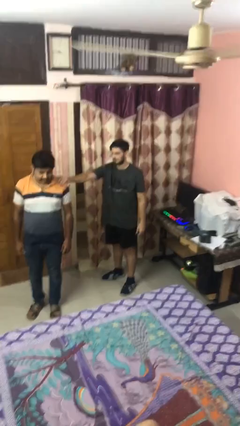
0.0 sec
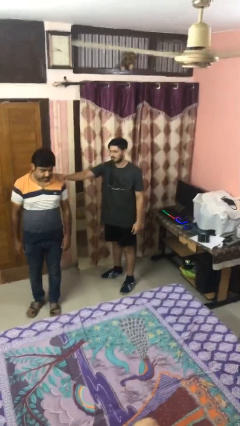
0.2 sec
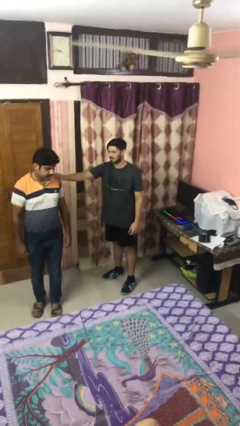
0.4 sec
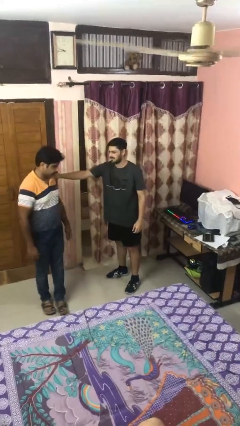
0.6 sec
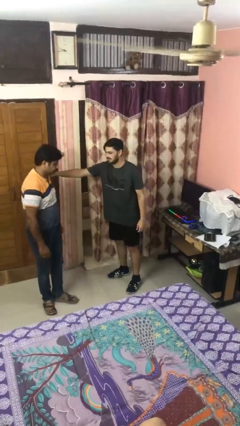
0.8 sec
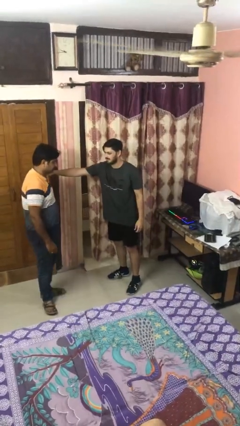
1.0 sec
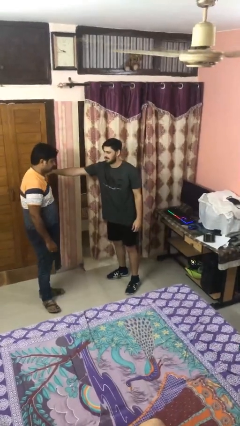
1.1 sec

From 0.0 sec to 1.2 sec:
person spins person around

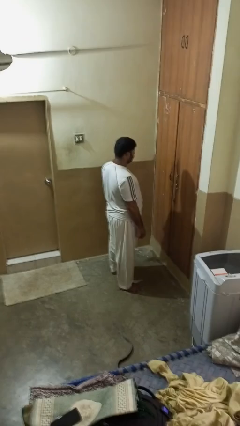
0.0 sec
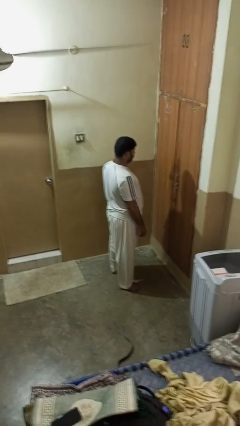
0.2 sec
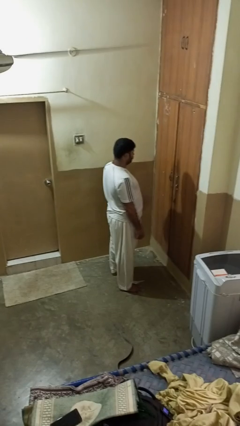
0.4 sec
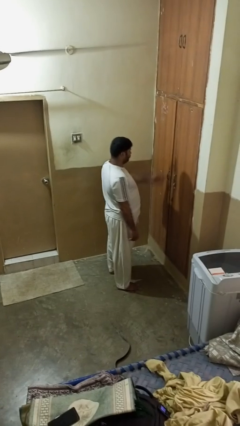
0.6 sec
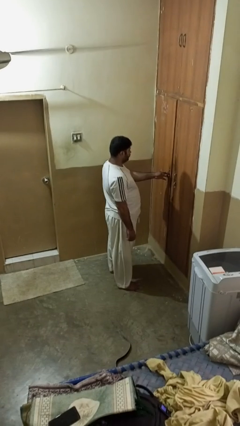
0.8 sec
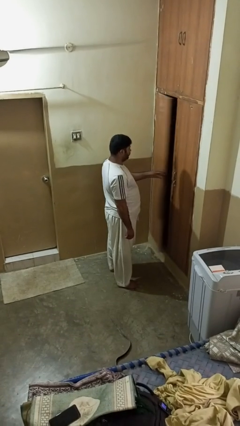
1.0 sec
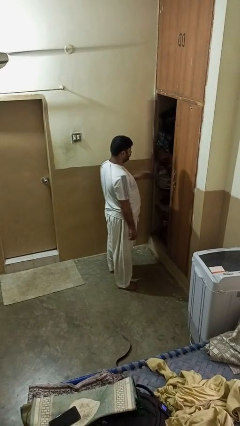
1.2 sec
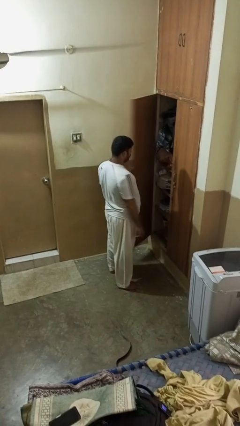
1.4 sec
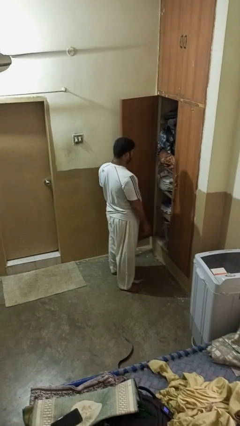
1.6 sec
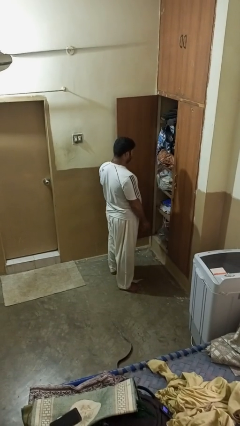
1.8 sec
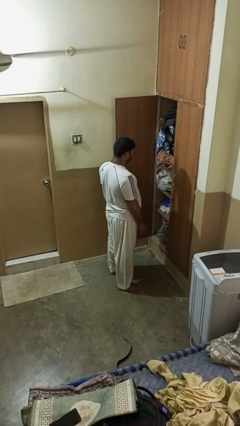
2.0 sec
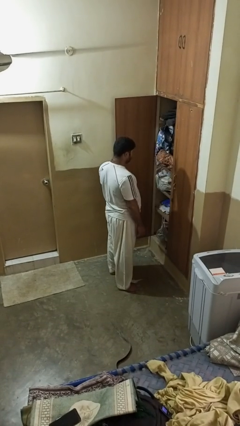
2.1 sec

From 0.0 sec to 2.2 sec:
person opens closet door

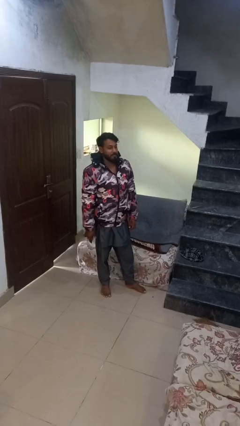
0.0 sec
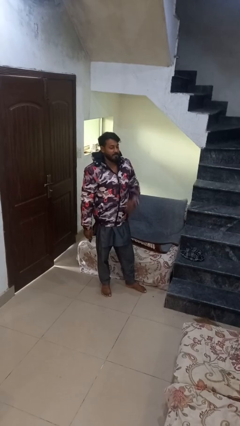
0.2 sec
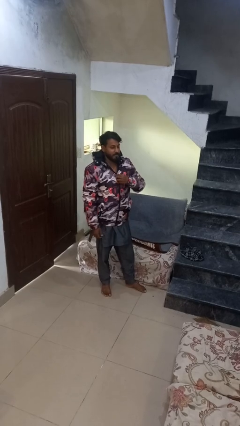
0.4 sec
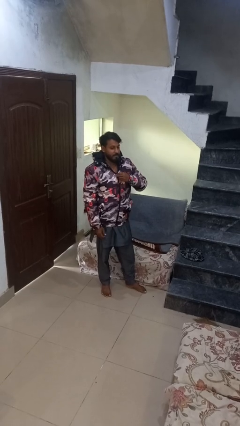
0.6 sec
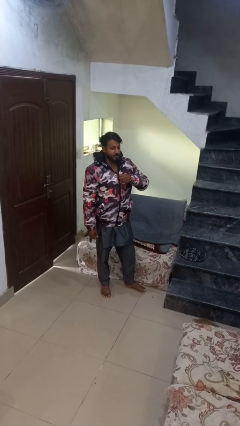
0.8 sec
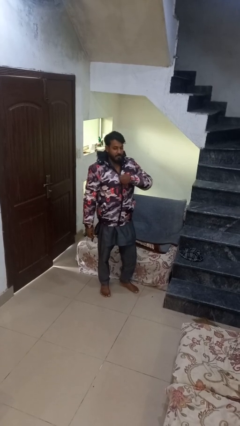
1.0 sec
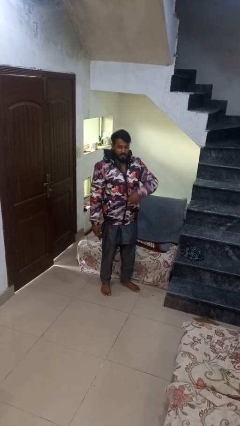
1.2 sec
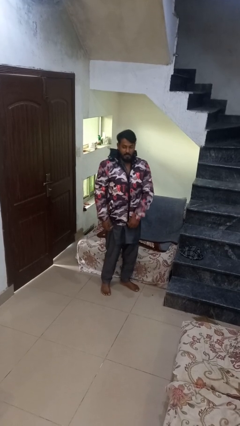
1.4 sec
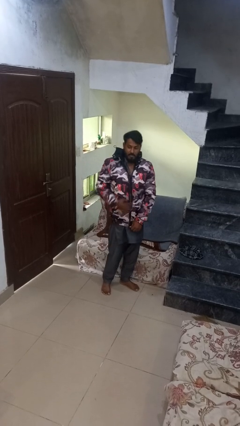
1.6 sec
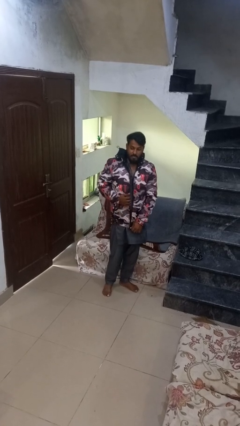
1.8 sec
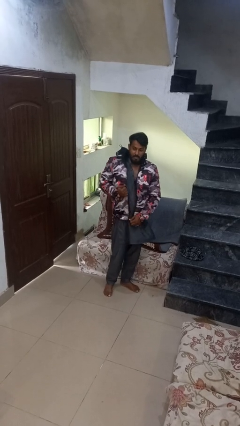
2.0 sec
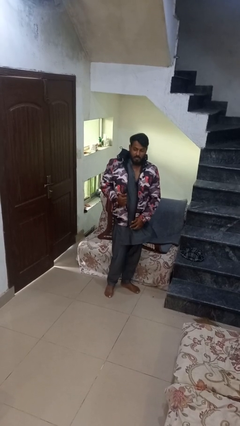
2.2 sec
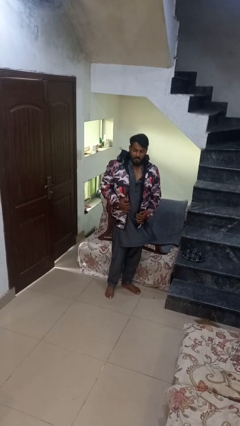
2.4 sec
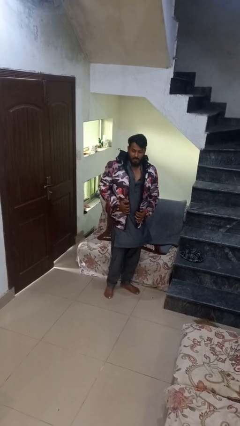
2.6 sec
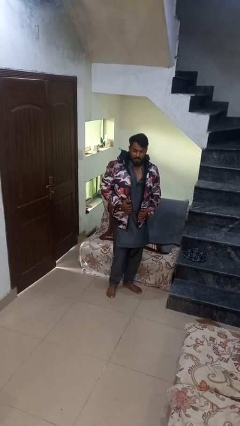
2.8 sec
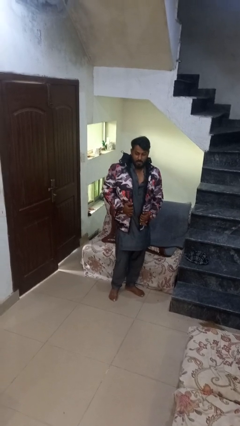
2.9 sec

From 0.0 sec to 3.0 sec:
person unzips jacket

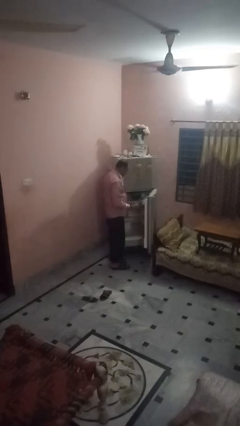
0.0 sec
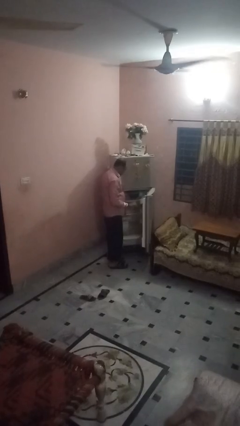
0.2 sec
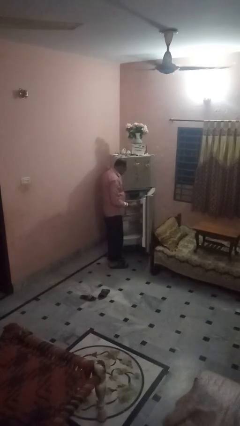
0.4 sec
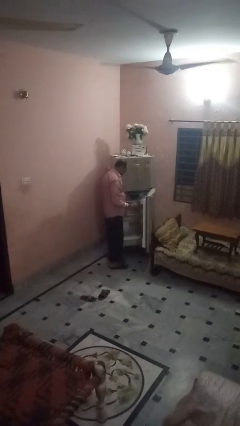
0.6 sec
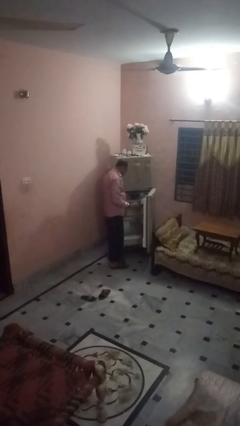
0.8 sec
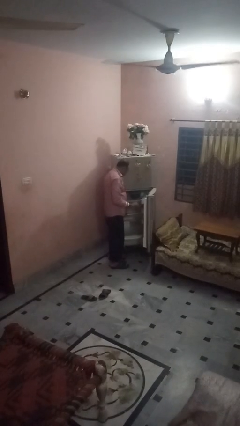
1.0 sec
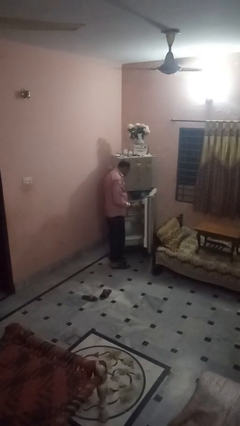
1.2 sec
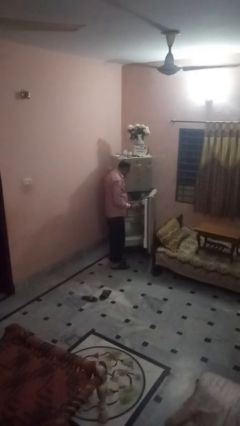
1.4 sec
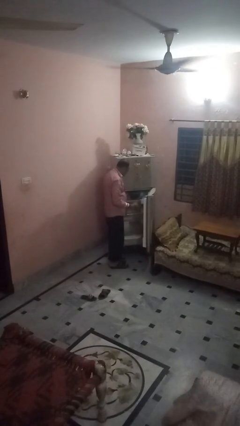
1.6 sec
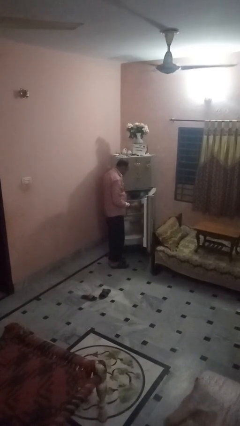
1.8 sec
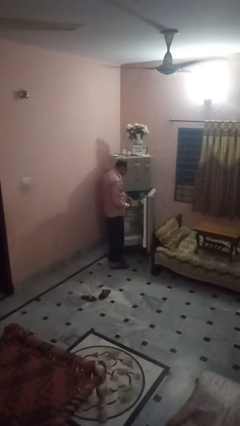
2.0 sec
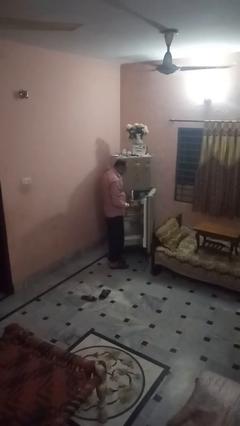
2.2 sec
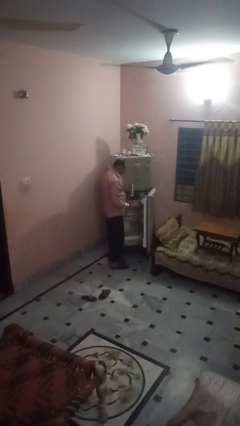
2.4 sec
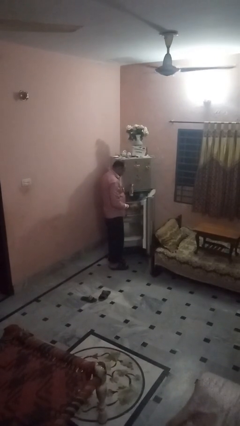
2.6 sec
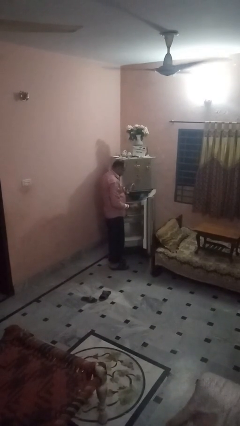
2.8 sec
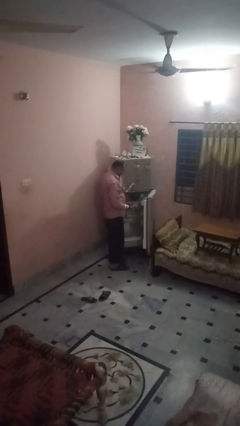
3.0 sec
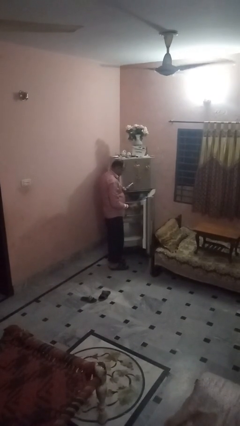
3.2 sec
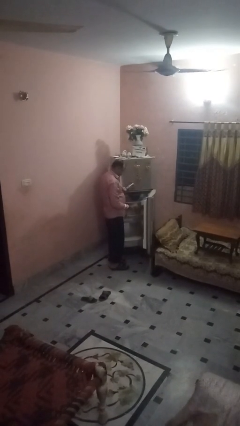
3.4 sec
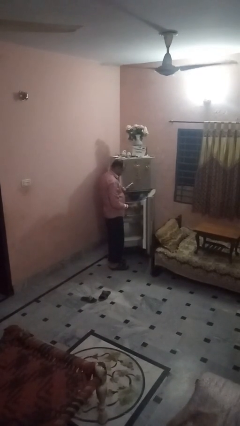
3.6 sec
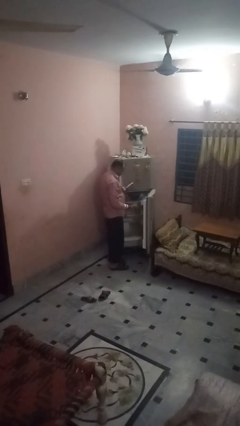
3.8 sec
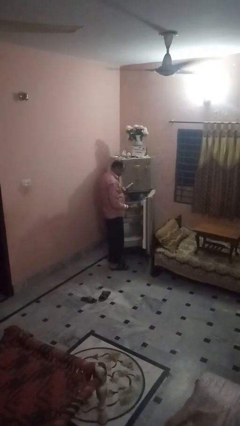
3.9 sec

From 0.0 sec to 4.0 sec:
person puts object into refrigerator

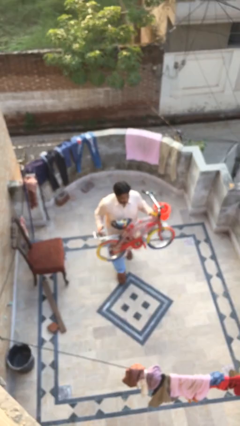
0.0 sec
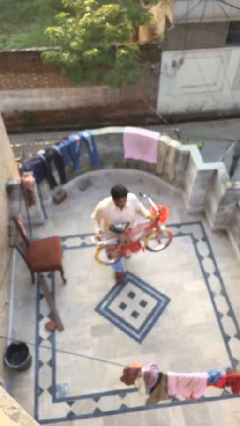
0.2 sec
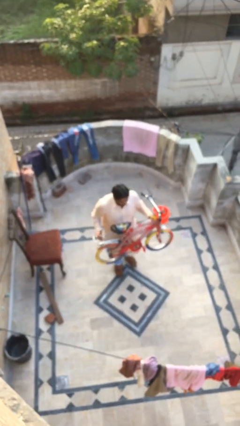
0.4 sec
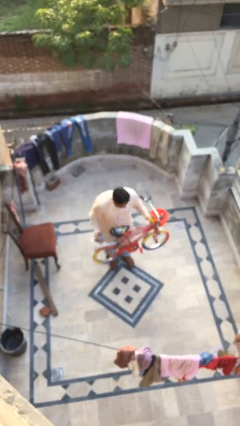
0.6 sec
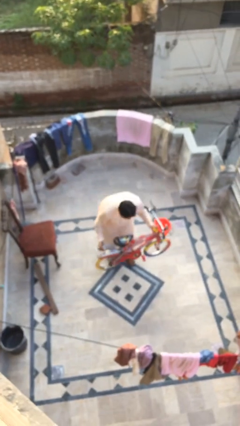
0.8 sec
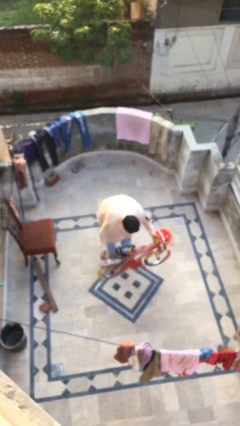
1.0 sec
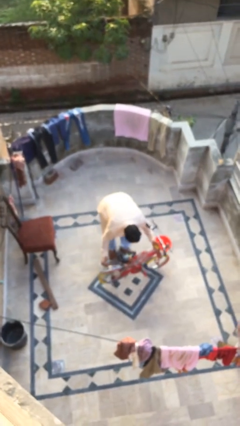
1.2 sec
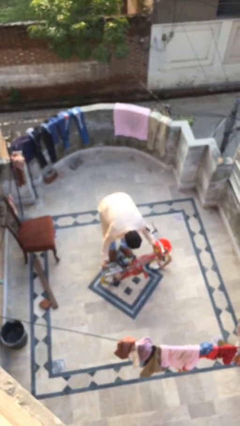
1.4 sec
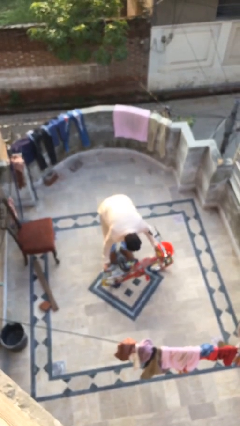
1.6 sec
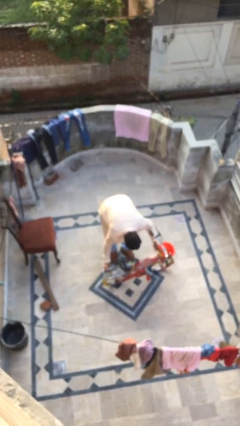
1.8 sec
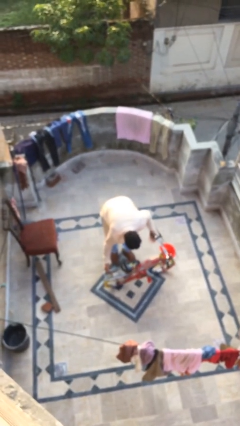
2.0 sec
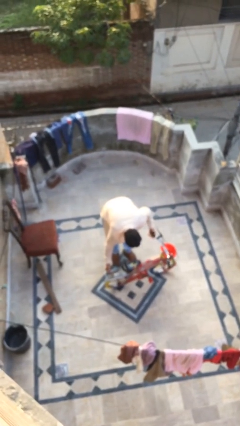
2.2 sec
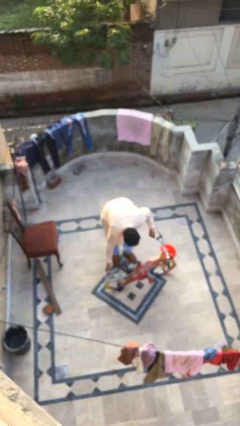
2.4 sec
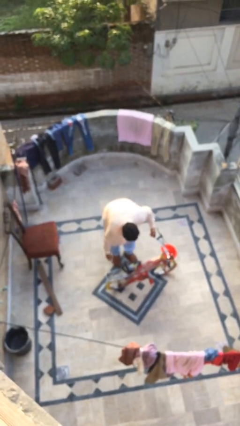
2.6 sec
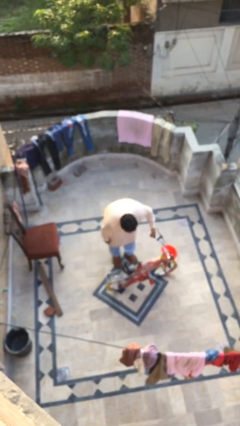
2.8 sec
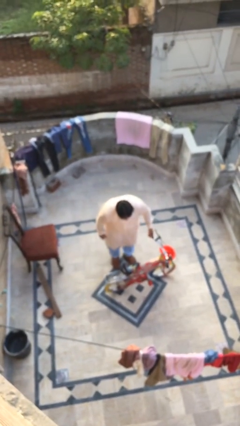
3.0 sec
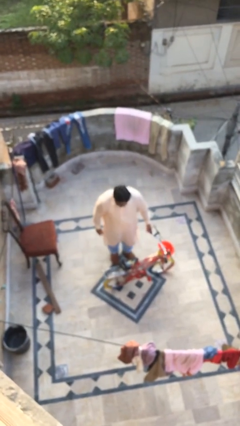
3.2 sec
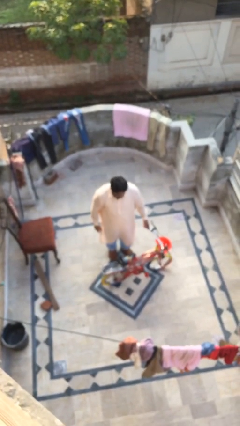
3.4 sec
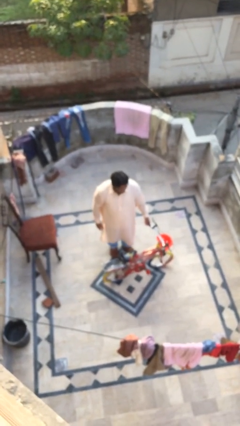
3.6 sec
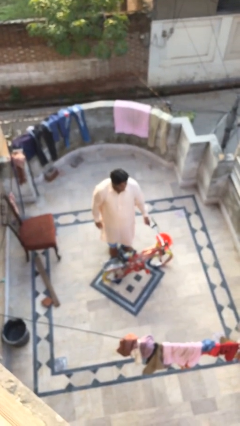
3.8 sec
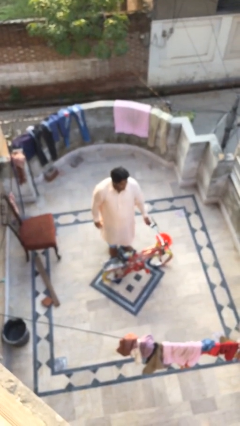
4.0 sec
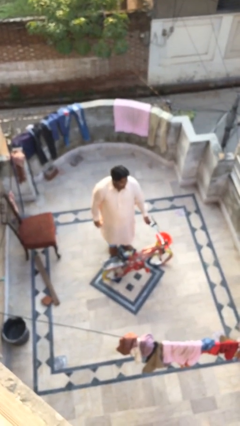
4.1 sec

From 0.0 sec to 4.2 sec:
person puts down object on floor

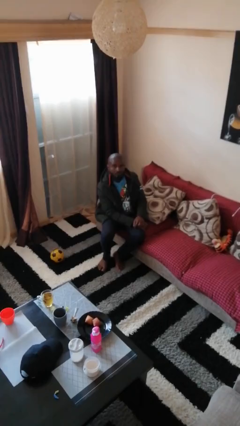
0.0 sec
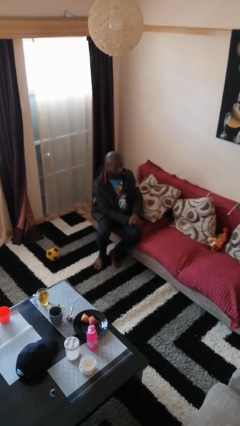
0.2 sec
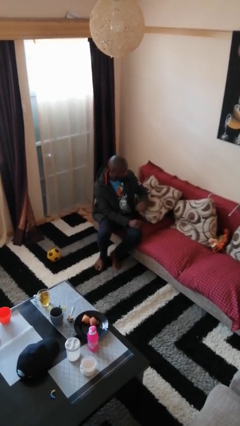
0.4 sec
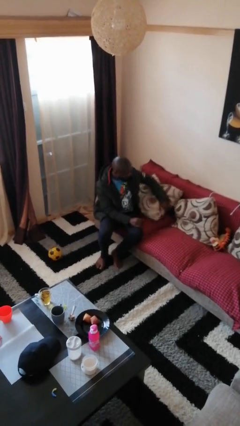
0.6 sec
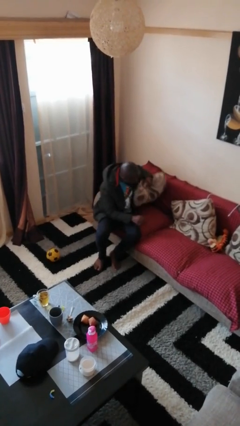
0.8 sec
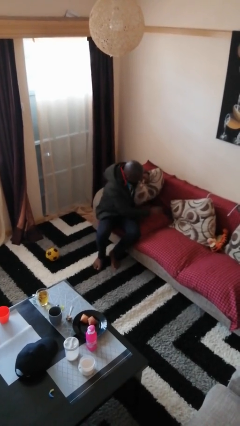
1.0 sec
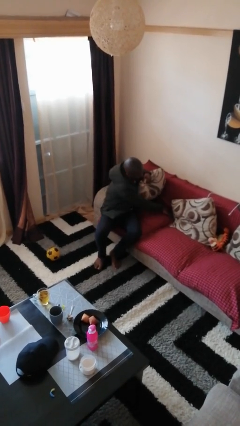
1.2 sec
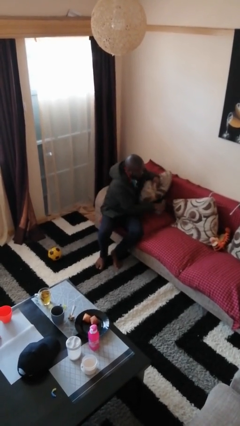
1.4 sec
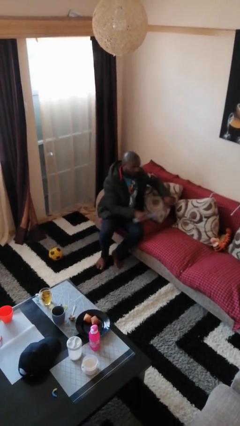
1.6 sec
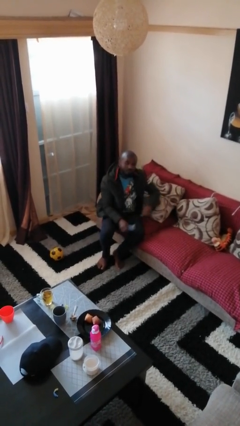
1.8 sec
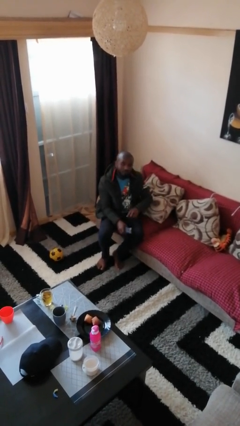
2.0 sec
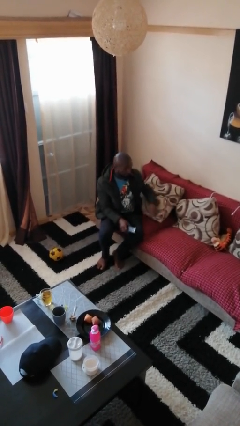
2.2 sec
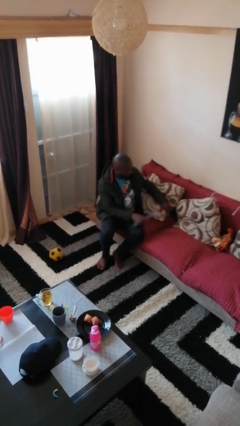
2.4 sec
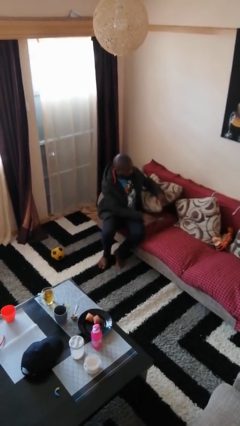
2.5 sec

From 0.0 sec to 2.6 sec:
person searches in couch
